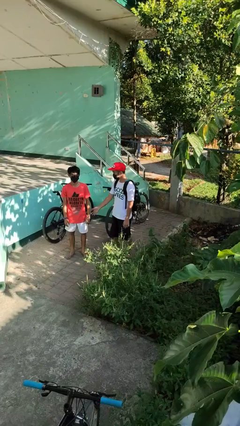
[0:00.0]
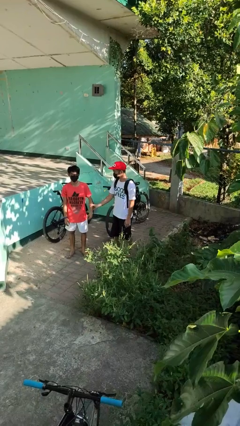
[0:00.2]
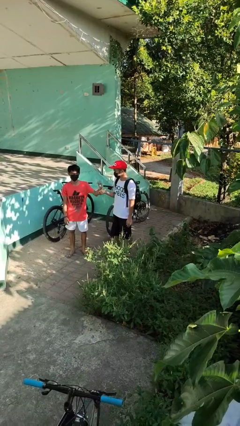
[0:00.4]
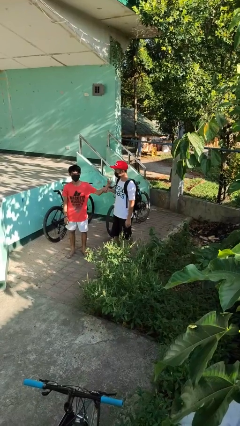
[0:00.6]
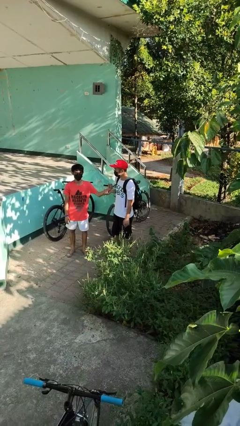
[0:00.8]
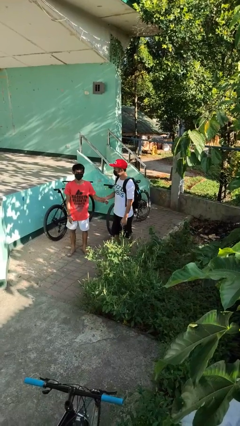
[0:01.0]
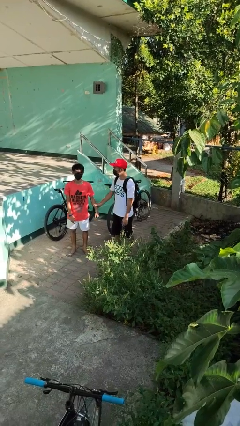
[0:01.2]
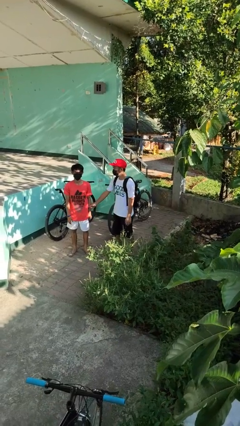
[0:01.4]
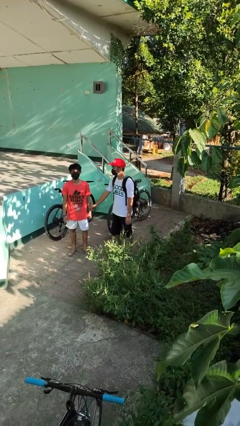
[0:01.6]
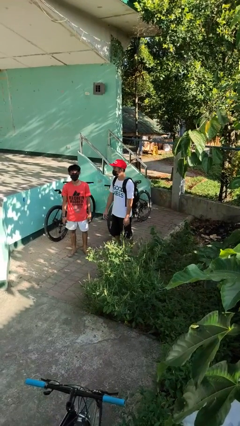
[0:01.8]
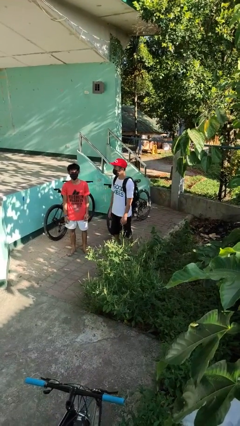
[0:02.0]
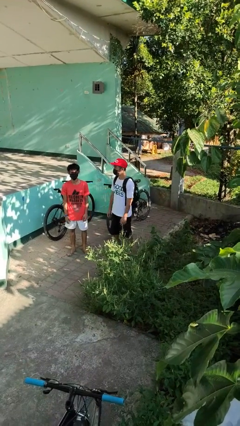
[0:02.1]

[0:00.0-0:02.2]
person grabs person by forearm

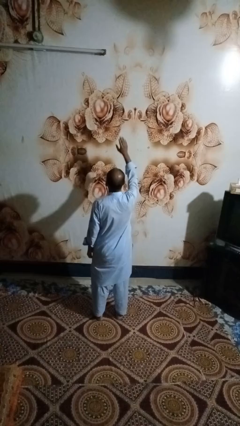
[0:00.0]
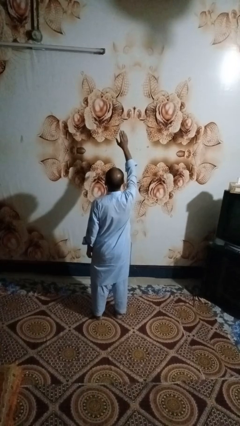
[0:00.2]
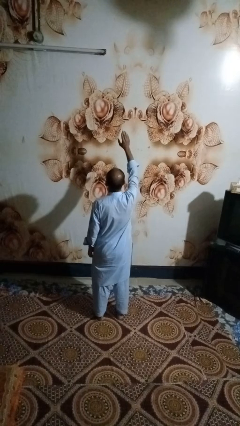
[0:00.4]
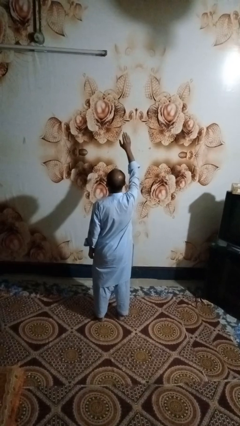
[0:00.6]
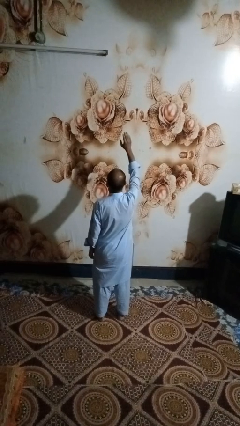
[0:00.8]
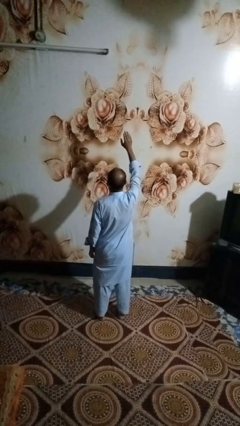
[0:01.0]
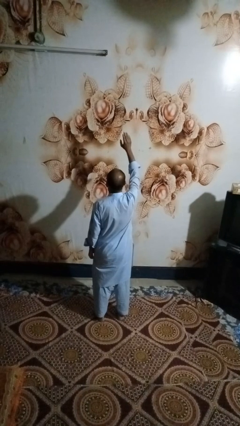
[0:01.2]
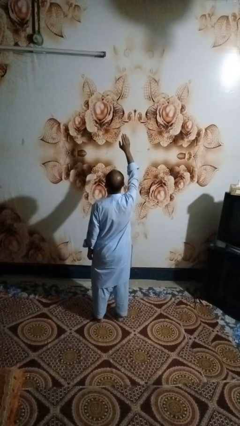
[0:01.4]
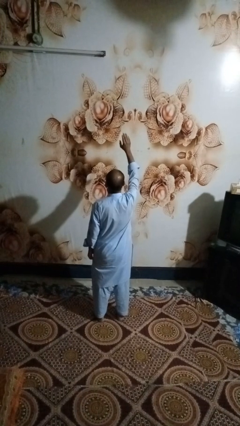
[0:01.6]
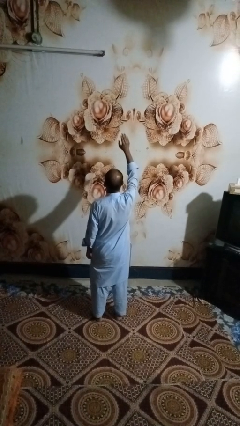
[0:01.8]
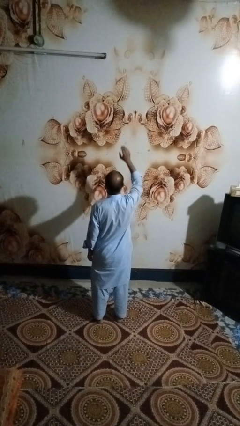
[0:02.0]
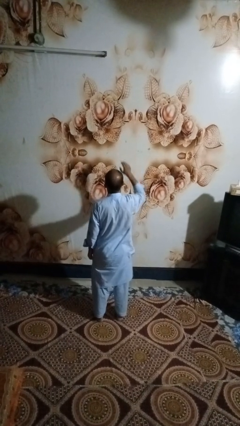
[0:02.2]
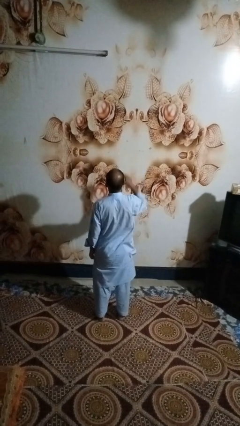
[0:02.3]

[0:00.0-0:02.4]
person gestures raise hand

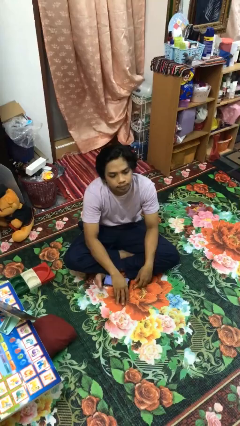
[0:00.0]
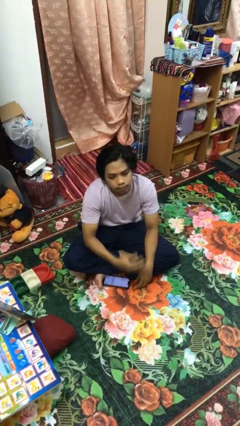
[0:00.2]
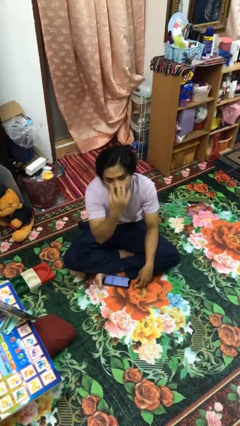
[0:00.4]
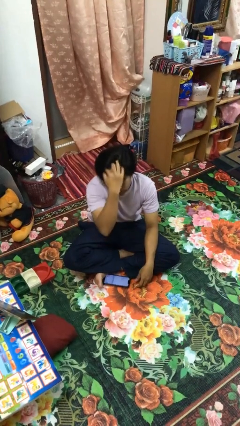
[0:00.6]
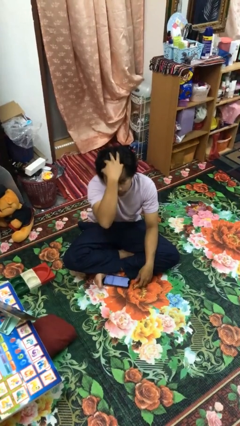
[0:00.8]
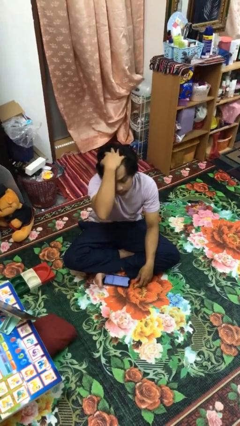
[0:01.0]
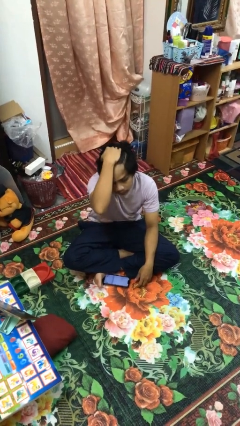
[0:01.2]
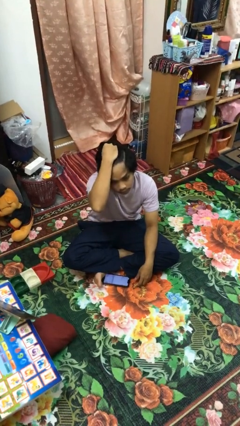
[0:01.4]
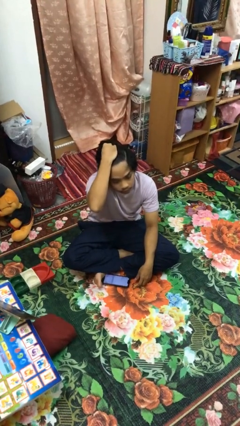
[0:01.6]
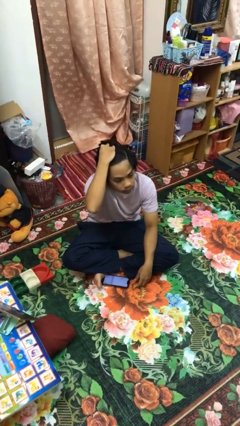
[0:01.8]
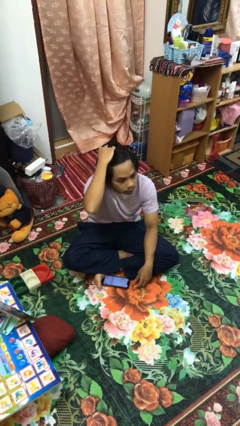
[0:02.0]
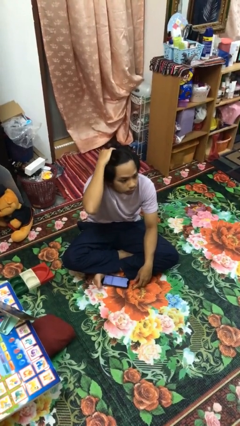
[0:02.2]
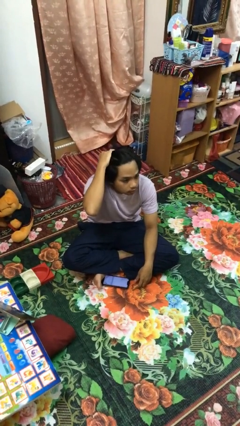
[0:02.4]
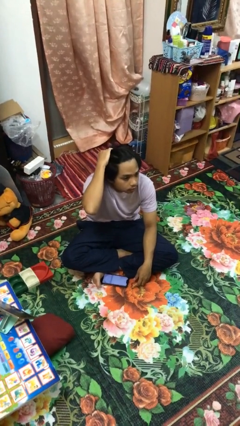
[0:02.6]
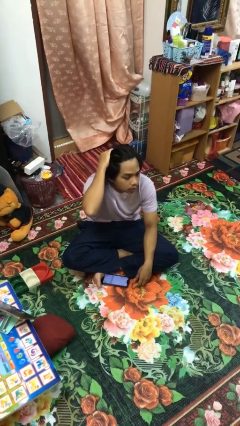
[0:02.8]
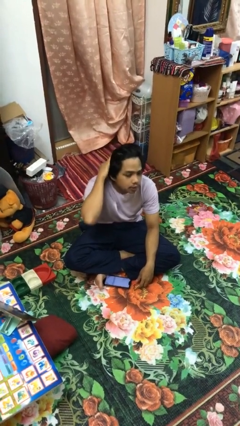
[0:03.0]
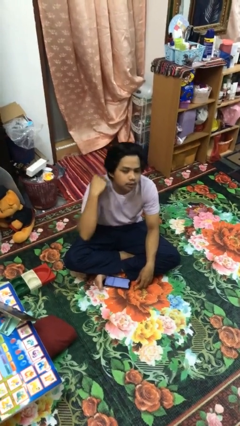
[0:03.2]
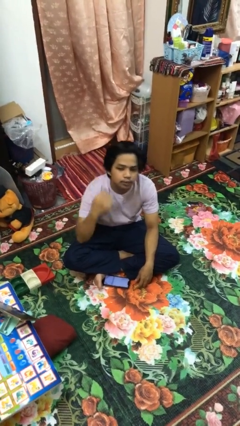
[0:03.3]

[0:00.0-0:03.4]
person strokes hair

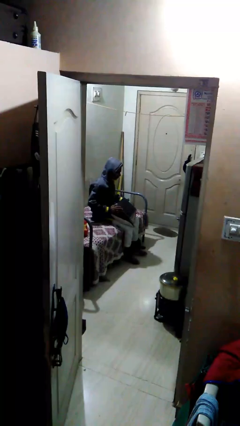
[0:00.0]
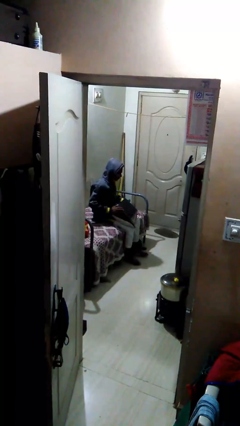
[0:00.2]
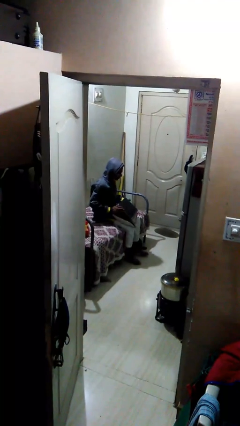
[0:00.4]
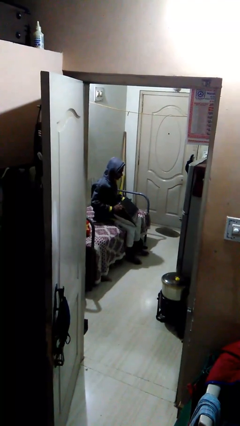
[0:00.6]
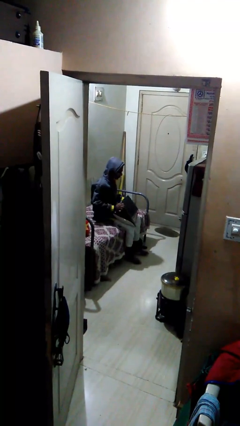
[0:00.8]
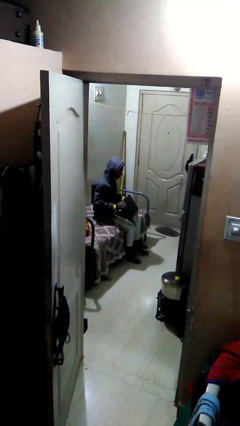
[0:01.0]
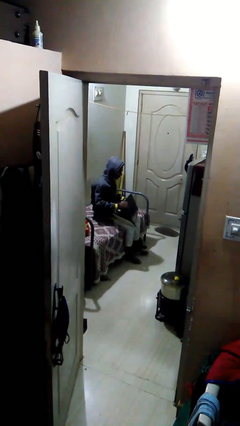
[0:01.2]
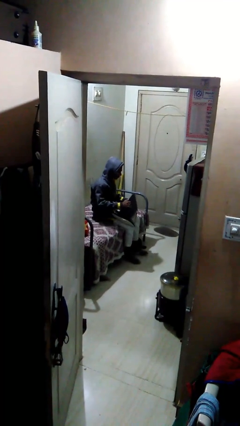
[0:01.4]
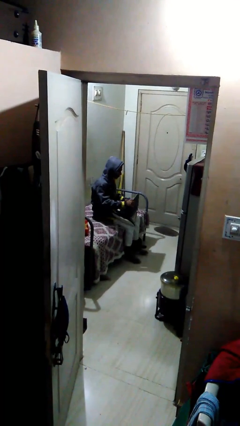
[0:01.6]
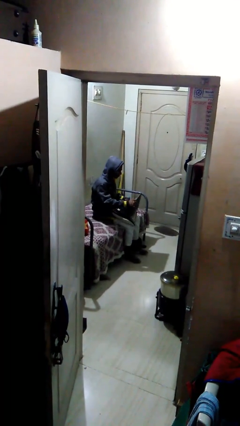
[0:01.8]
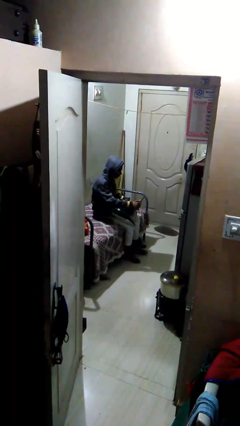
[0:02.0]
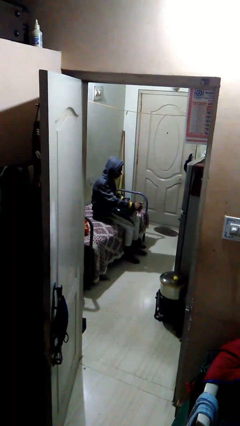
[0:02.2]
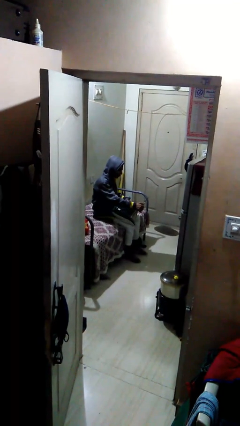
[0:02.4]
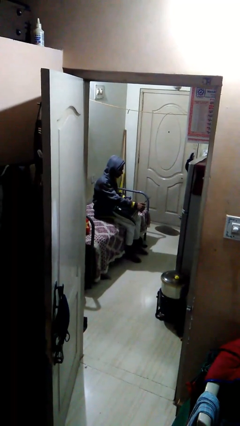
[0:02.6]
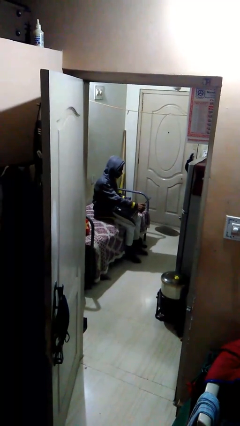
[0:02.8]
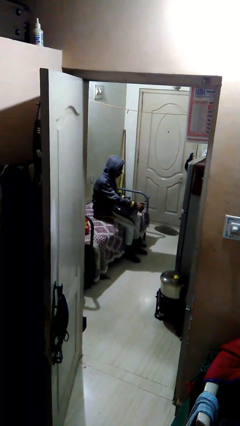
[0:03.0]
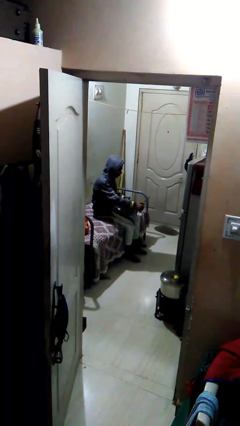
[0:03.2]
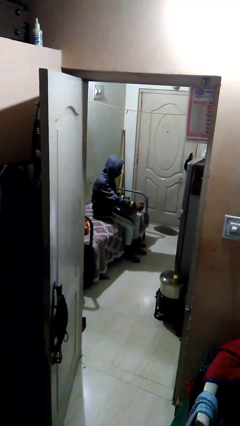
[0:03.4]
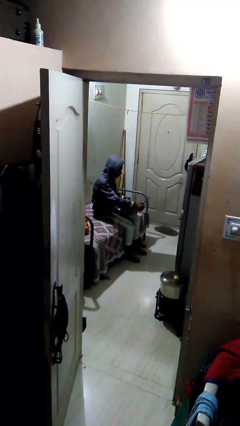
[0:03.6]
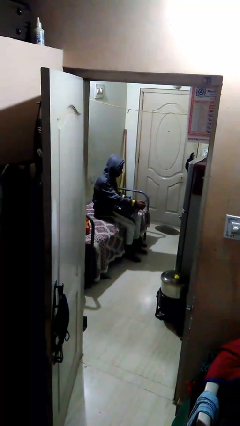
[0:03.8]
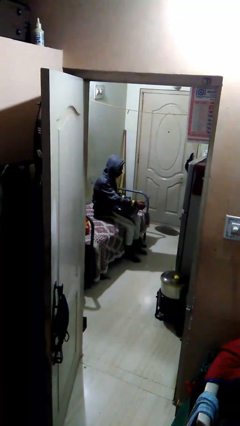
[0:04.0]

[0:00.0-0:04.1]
person interacts with laptop

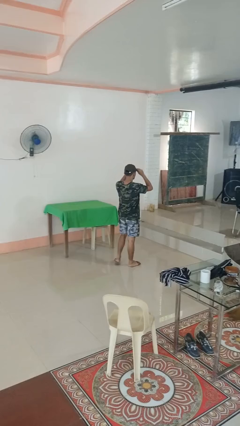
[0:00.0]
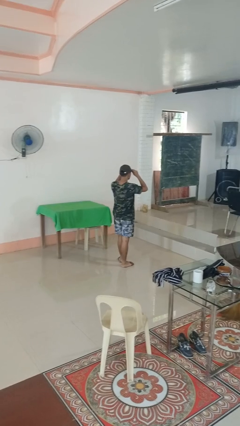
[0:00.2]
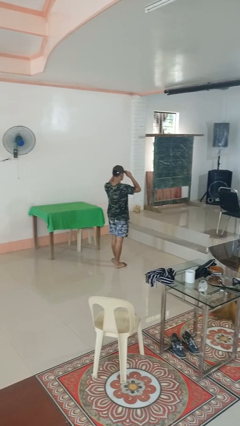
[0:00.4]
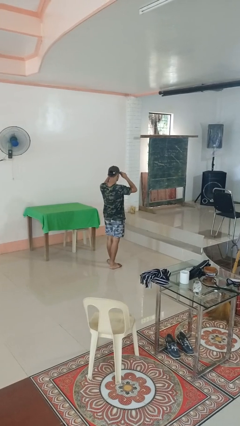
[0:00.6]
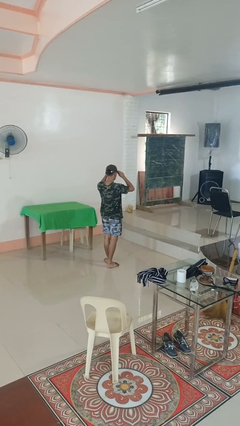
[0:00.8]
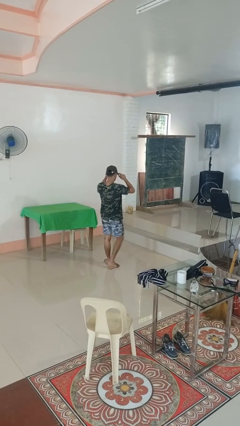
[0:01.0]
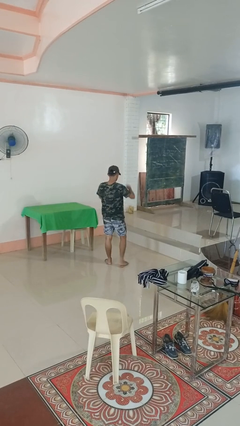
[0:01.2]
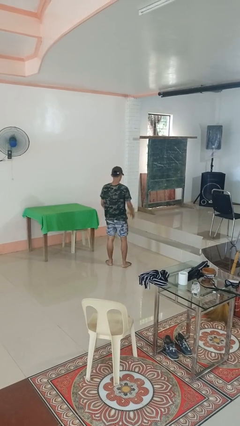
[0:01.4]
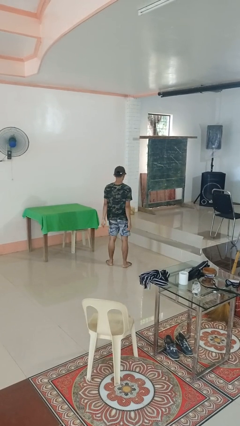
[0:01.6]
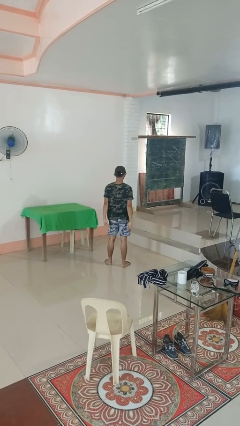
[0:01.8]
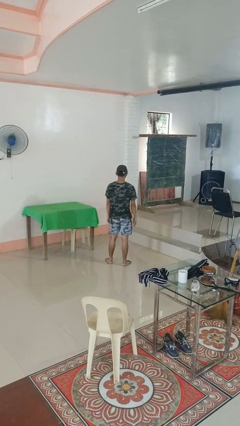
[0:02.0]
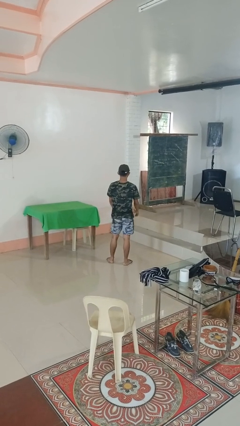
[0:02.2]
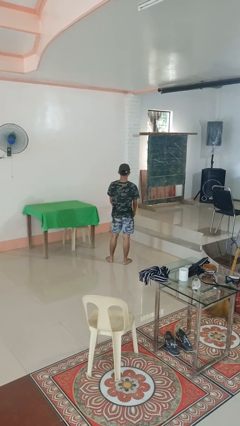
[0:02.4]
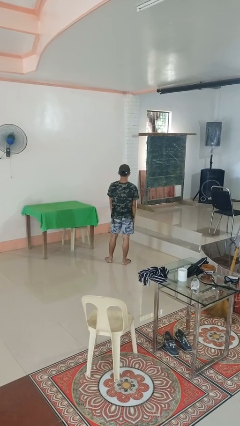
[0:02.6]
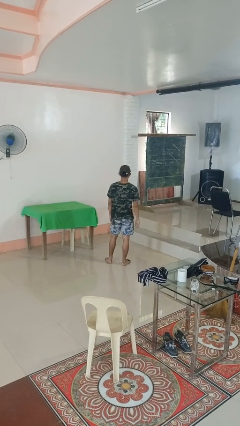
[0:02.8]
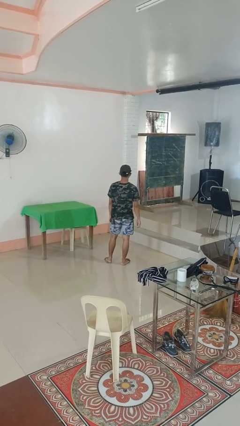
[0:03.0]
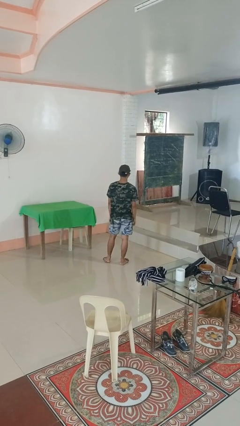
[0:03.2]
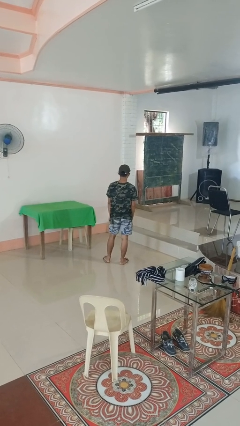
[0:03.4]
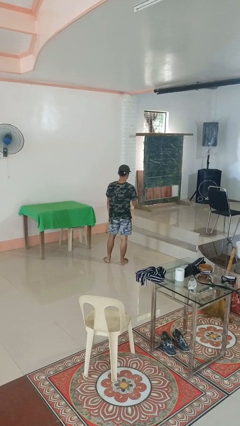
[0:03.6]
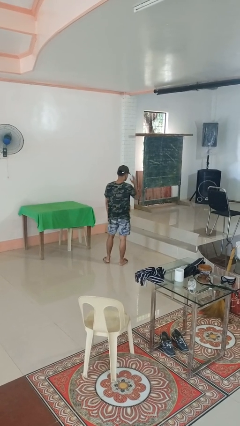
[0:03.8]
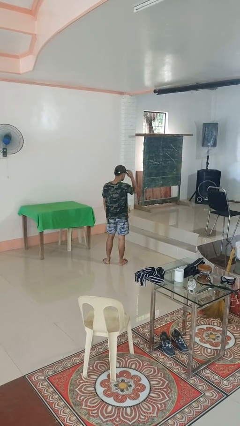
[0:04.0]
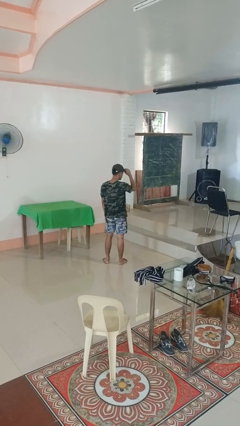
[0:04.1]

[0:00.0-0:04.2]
person puts on hat

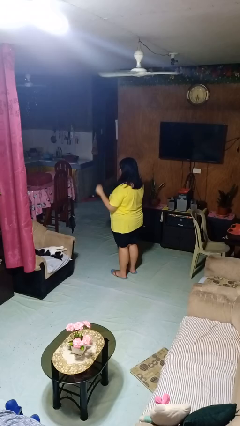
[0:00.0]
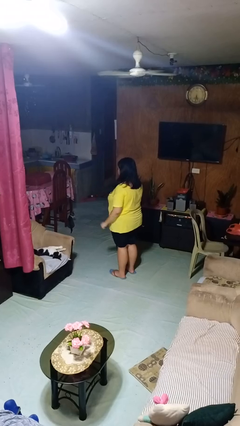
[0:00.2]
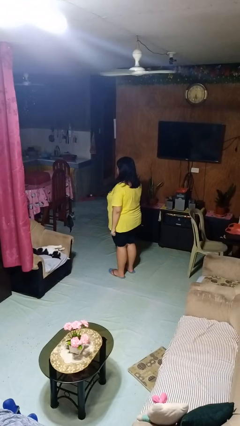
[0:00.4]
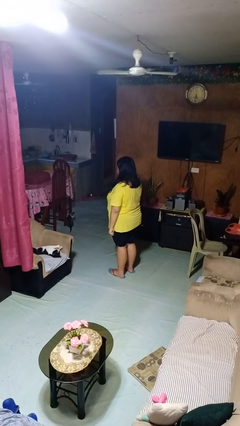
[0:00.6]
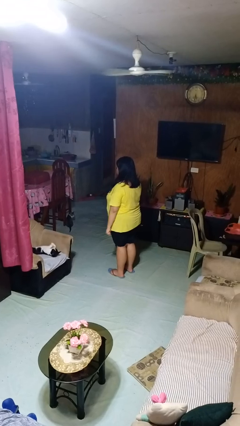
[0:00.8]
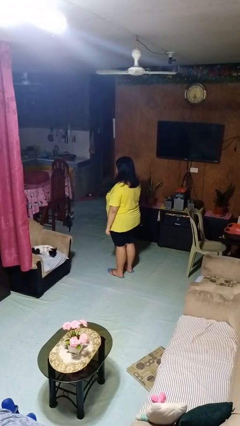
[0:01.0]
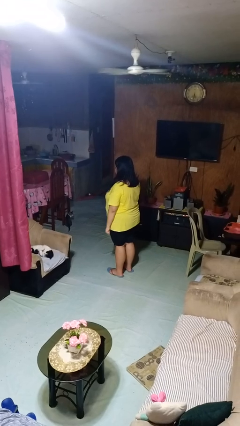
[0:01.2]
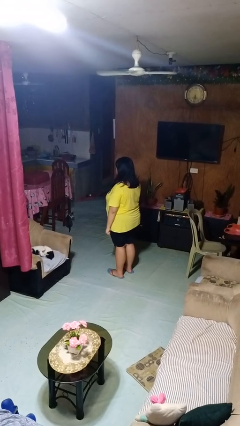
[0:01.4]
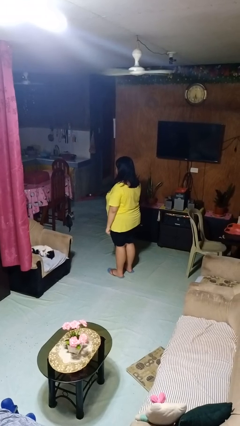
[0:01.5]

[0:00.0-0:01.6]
person gestures lower hand
